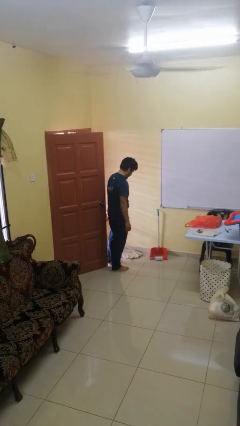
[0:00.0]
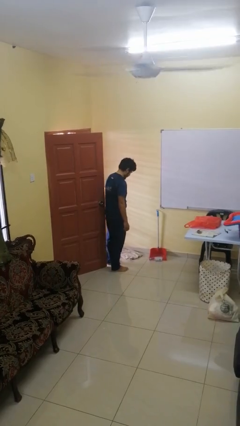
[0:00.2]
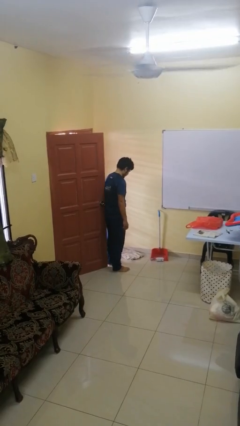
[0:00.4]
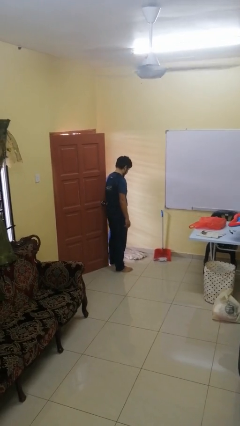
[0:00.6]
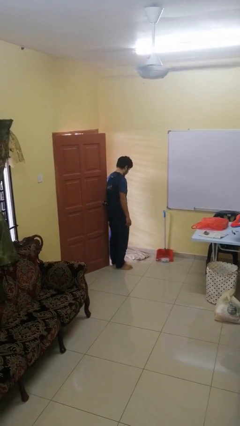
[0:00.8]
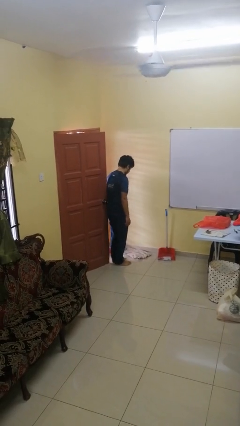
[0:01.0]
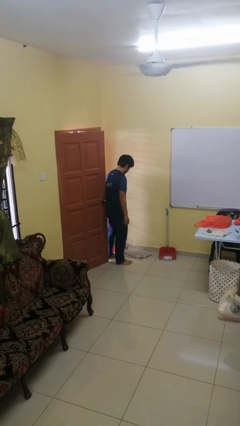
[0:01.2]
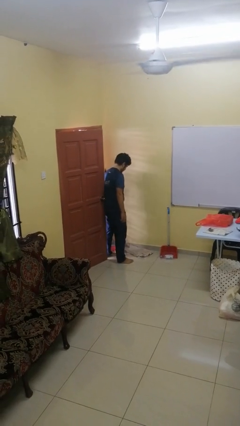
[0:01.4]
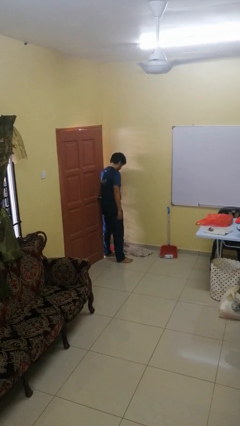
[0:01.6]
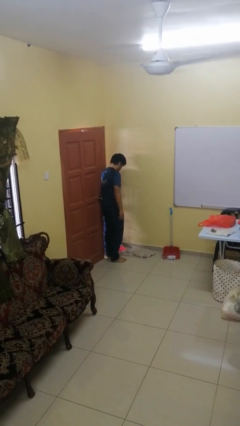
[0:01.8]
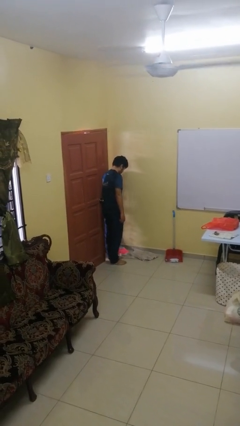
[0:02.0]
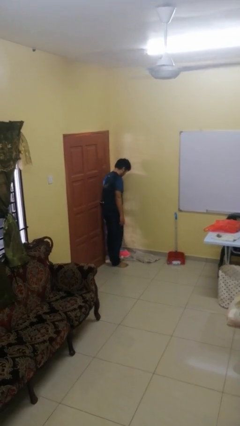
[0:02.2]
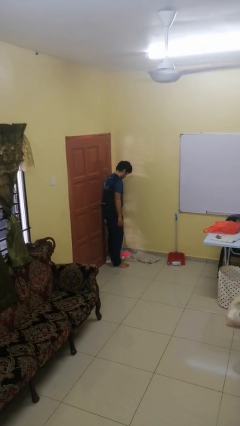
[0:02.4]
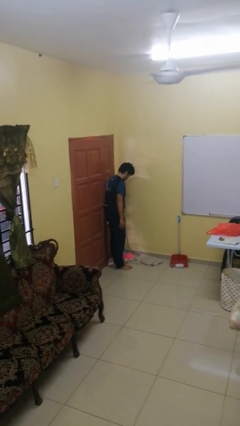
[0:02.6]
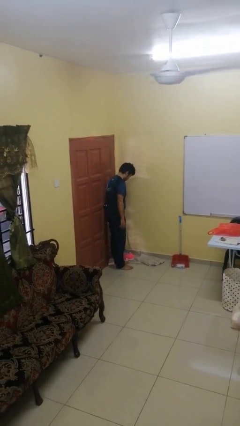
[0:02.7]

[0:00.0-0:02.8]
person closes door with hip

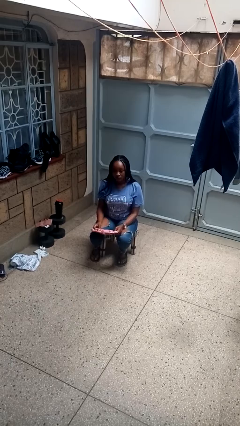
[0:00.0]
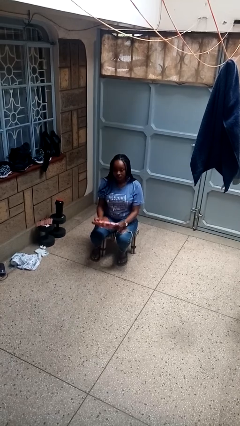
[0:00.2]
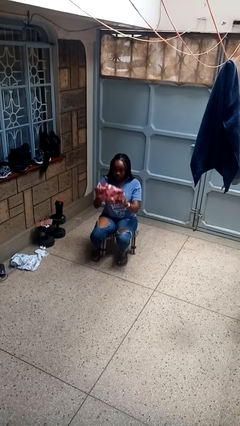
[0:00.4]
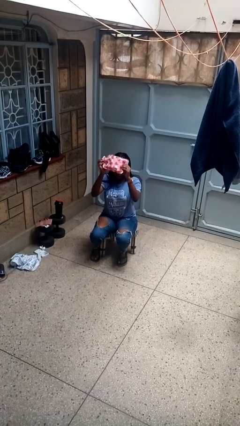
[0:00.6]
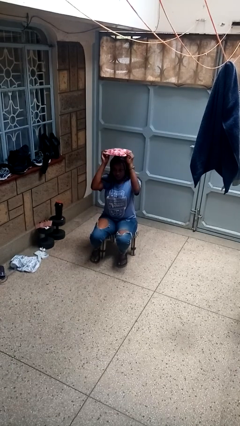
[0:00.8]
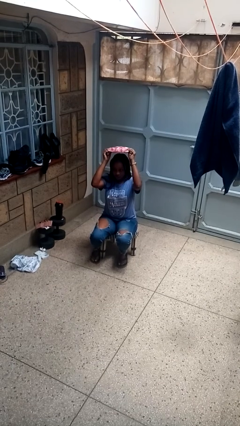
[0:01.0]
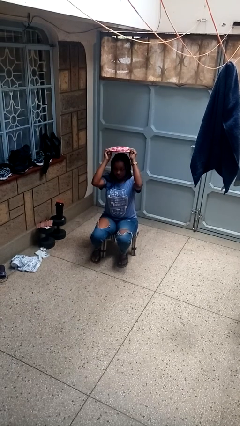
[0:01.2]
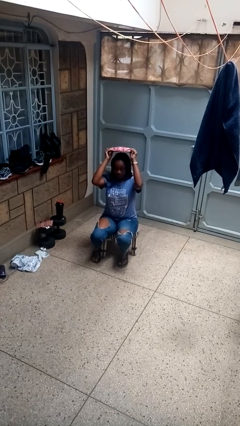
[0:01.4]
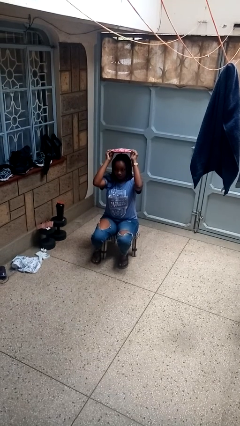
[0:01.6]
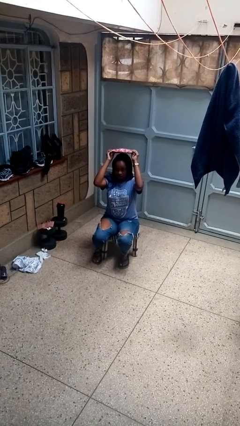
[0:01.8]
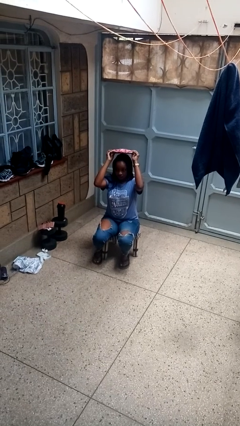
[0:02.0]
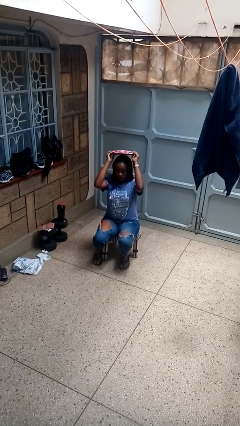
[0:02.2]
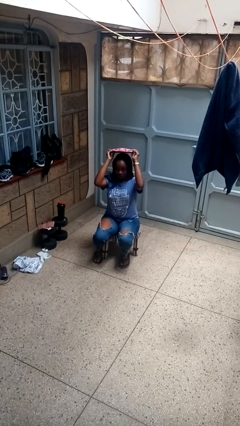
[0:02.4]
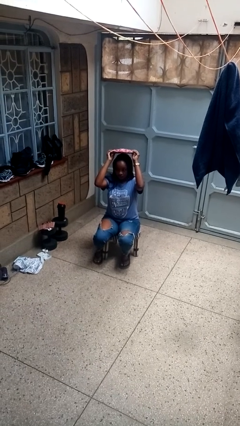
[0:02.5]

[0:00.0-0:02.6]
person holds object above head

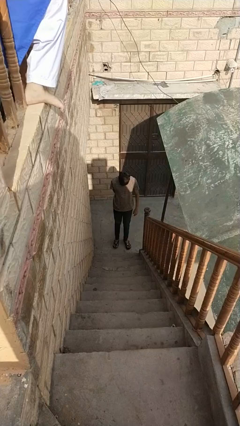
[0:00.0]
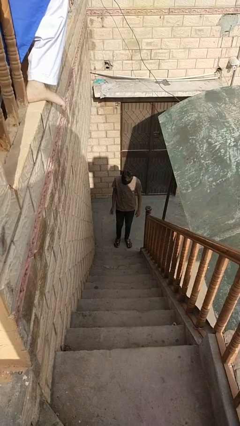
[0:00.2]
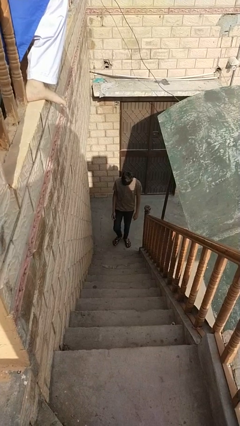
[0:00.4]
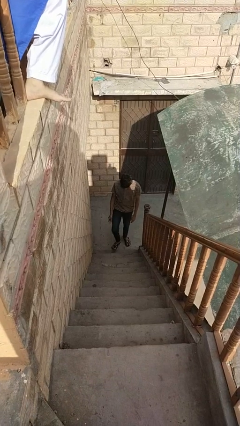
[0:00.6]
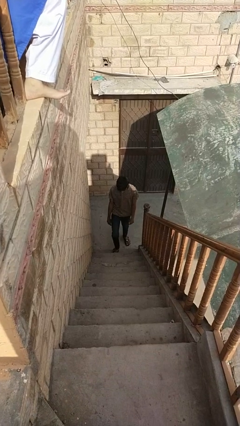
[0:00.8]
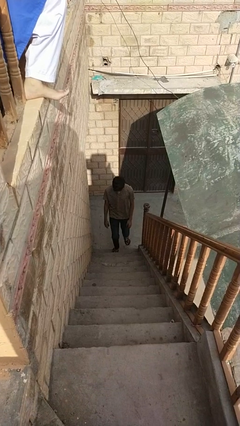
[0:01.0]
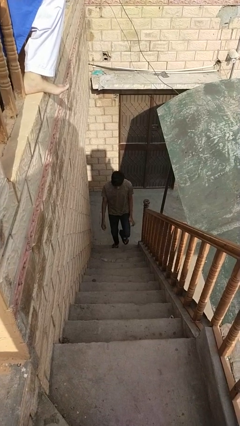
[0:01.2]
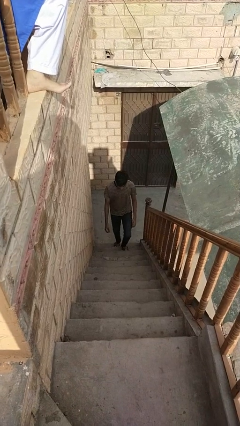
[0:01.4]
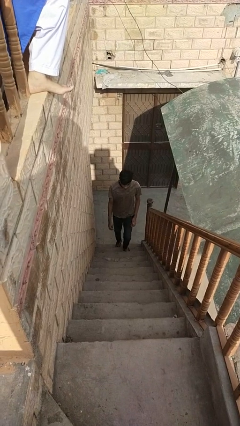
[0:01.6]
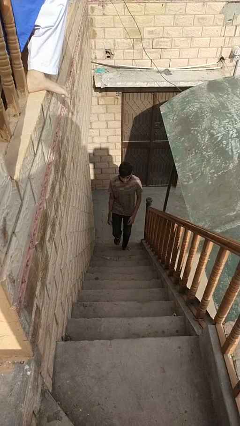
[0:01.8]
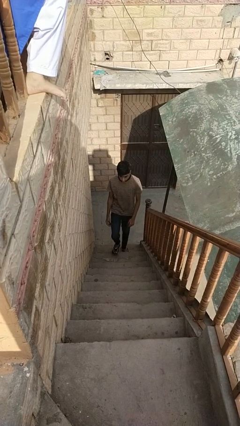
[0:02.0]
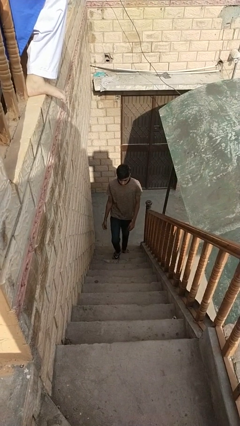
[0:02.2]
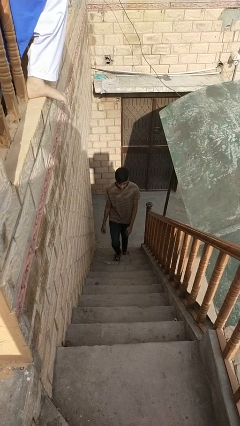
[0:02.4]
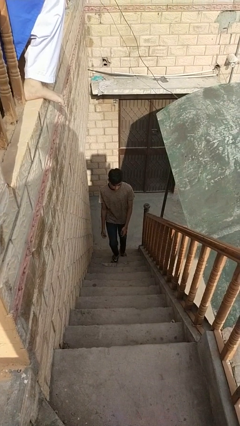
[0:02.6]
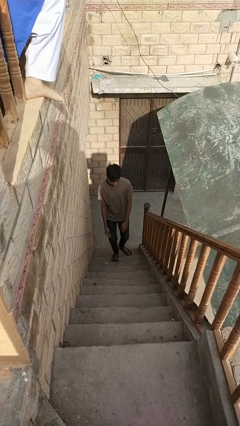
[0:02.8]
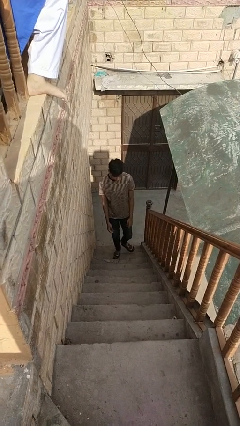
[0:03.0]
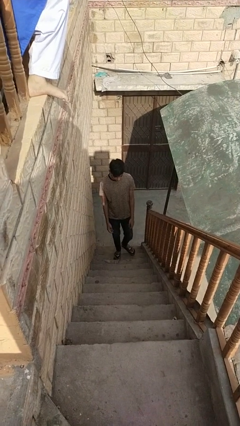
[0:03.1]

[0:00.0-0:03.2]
person climbs up stairs

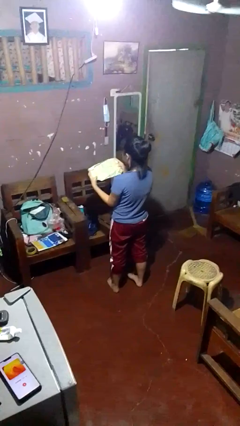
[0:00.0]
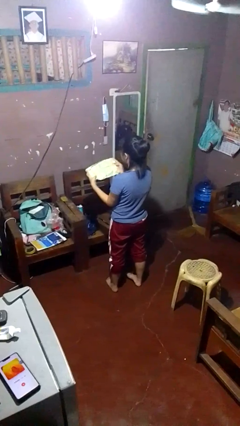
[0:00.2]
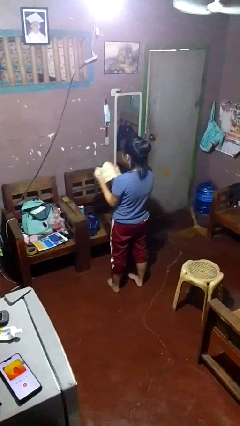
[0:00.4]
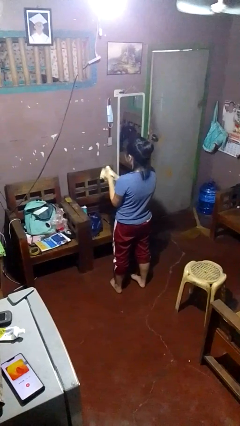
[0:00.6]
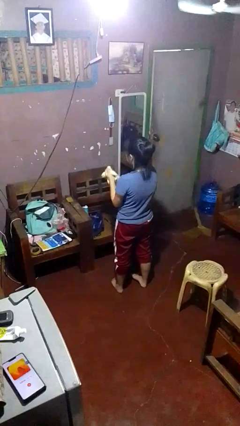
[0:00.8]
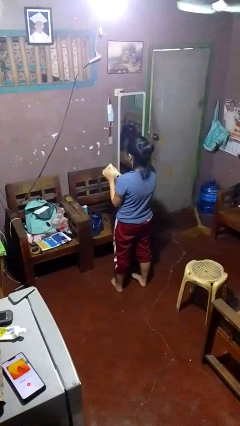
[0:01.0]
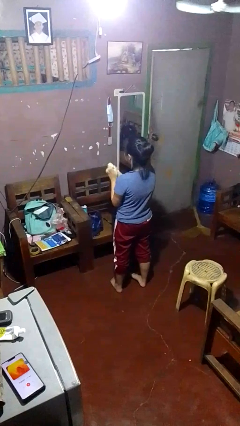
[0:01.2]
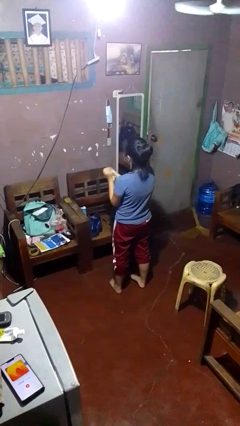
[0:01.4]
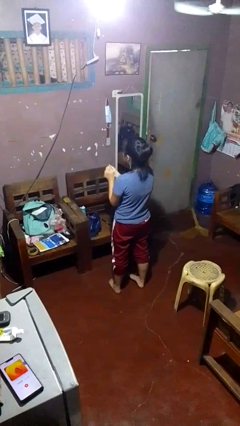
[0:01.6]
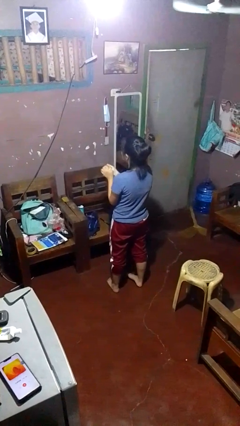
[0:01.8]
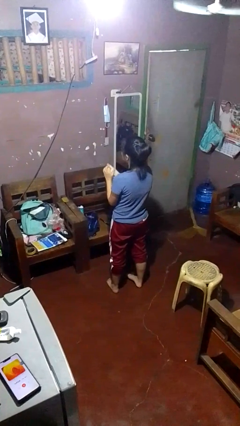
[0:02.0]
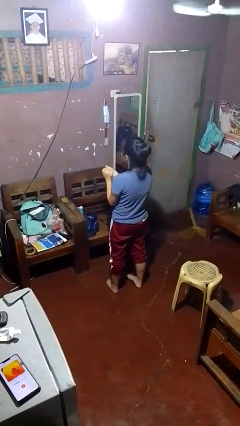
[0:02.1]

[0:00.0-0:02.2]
person crumples paper

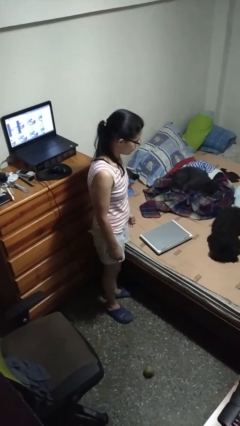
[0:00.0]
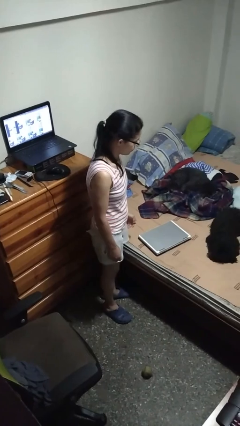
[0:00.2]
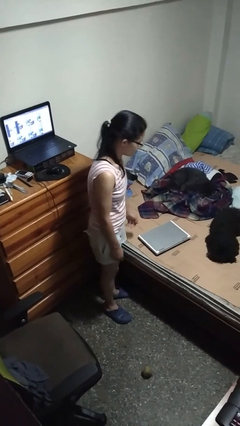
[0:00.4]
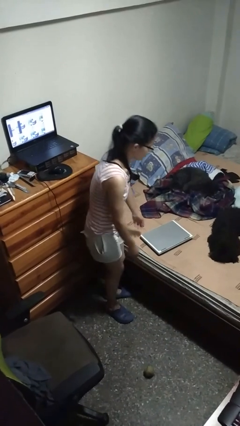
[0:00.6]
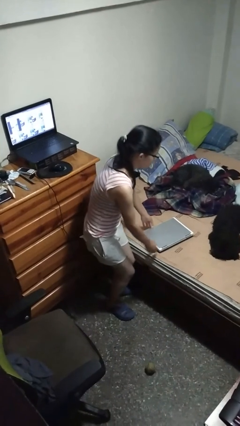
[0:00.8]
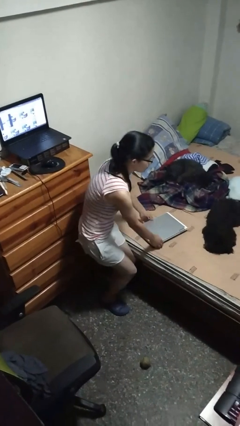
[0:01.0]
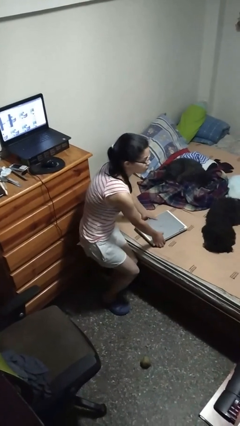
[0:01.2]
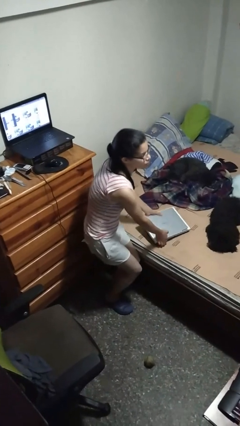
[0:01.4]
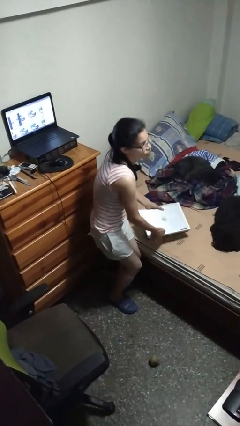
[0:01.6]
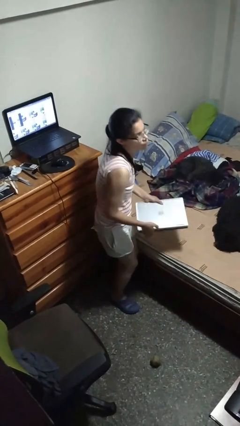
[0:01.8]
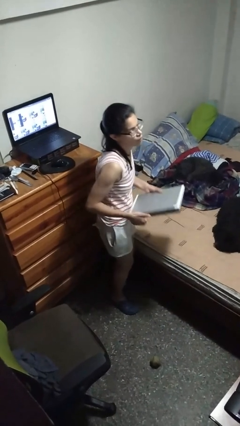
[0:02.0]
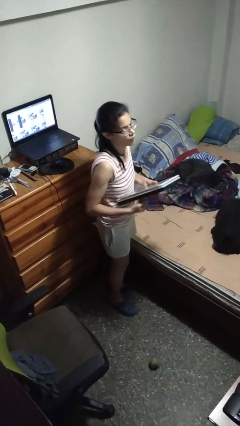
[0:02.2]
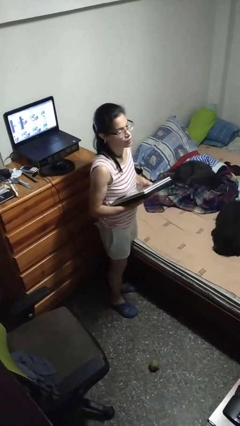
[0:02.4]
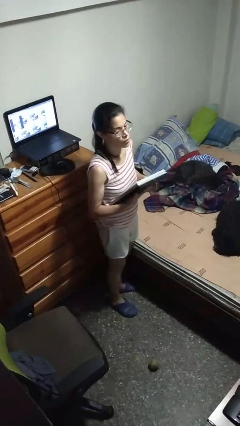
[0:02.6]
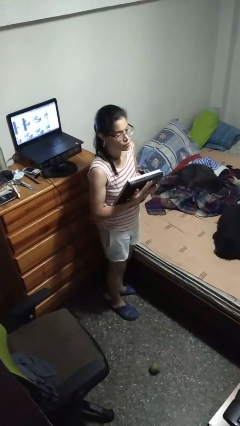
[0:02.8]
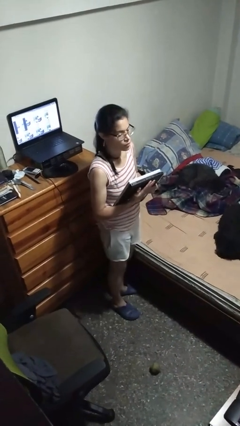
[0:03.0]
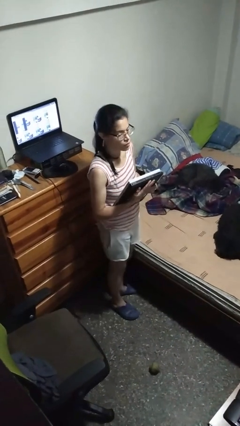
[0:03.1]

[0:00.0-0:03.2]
person picks up object from bed

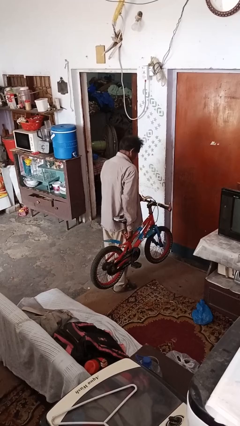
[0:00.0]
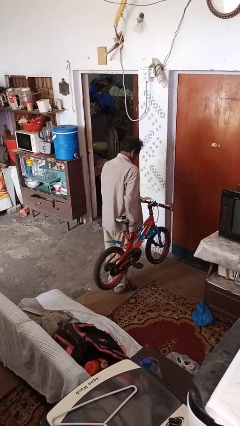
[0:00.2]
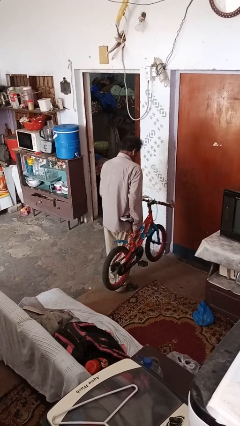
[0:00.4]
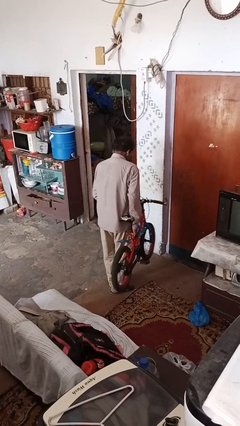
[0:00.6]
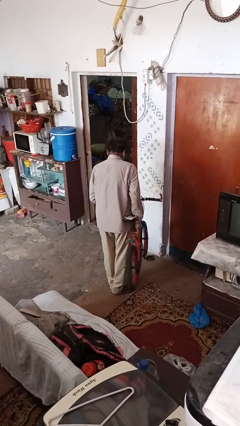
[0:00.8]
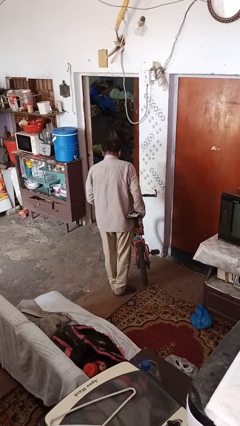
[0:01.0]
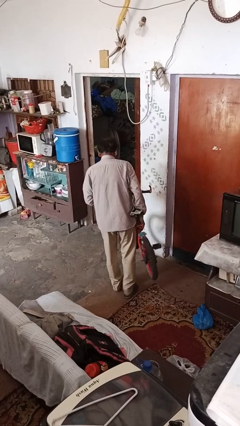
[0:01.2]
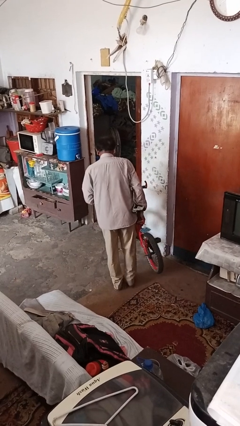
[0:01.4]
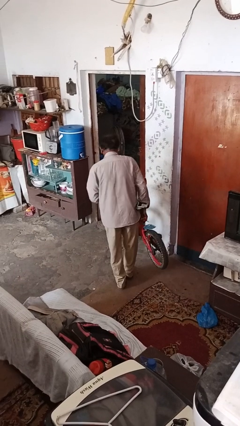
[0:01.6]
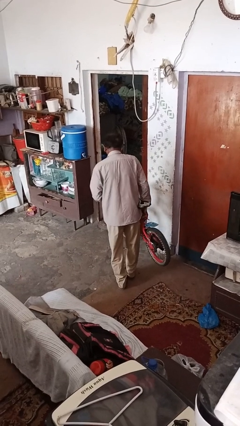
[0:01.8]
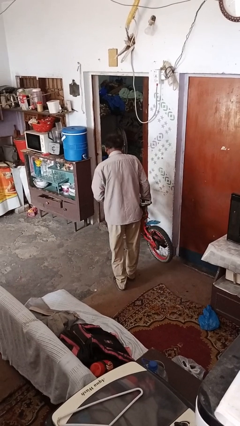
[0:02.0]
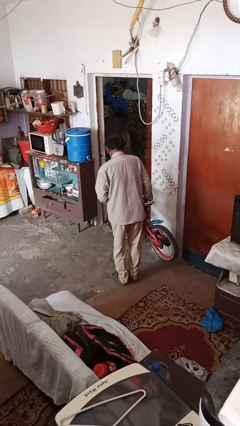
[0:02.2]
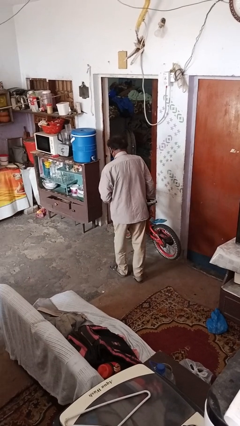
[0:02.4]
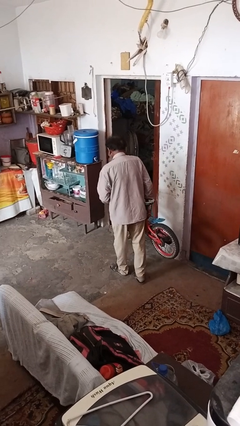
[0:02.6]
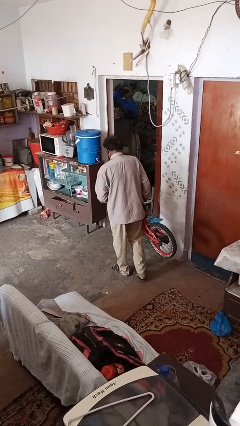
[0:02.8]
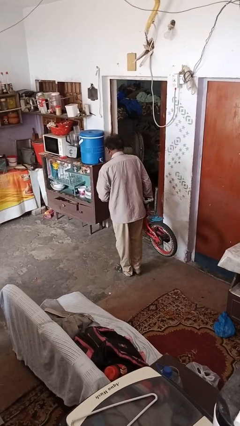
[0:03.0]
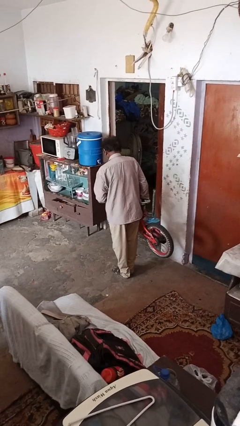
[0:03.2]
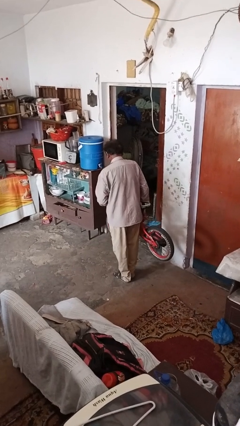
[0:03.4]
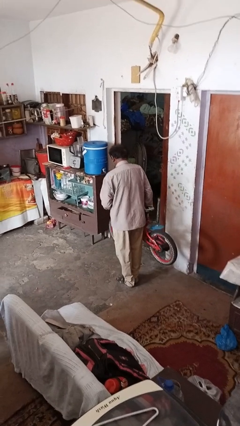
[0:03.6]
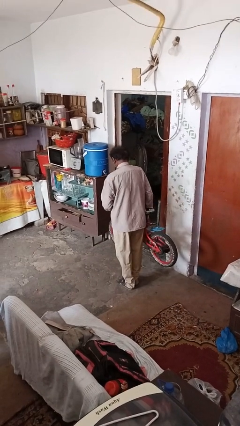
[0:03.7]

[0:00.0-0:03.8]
person carries bicycle
